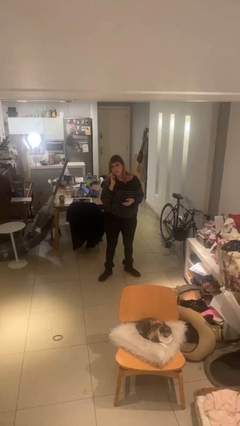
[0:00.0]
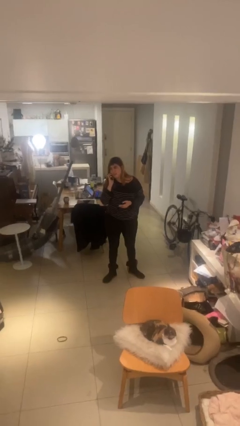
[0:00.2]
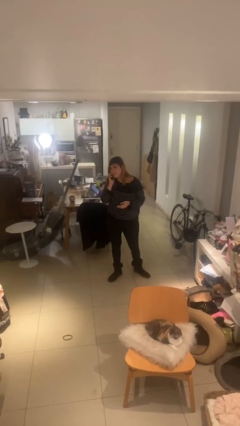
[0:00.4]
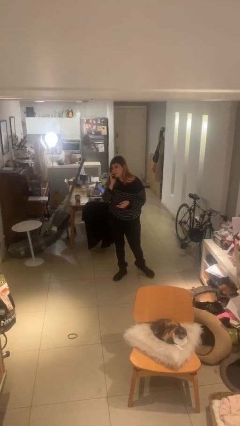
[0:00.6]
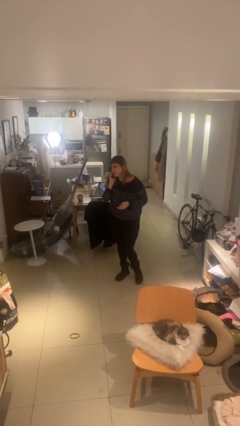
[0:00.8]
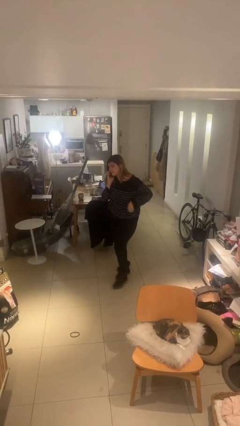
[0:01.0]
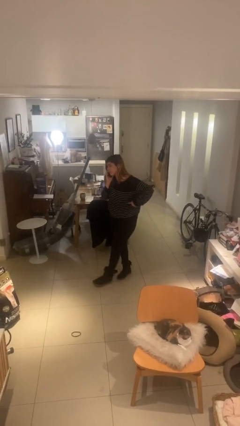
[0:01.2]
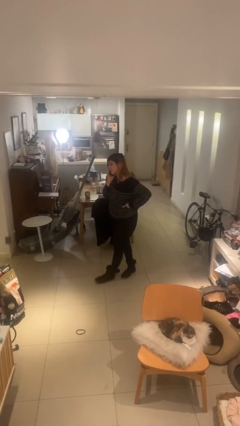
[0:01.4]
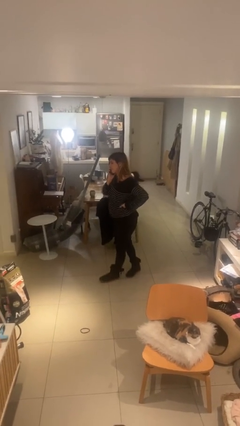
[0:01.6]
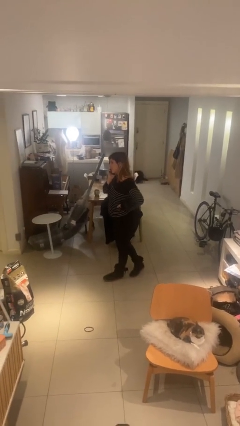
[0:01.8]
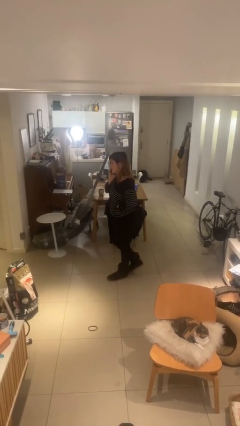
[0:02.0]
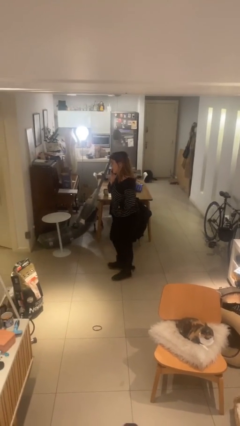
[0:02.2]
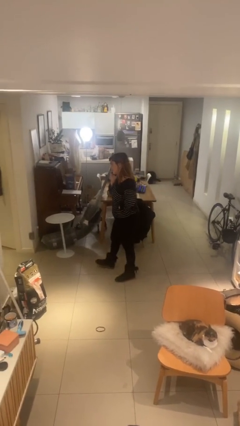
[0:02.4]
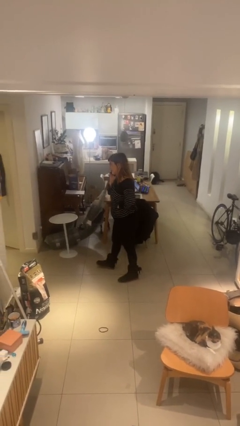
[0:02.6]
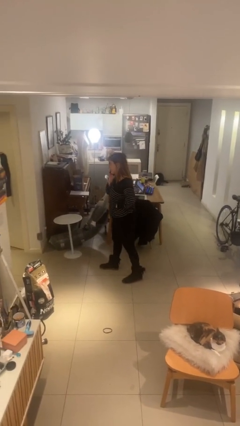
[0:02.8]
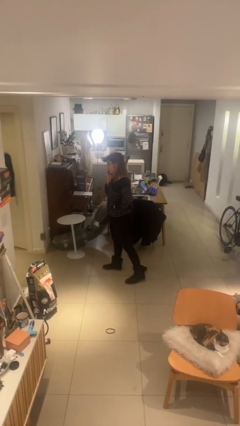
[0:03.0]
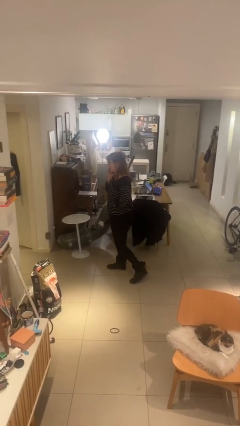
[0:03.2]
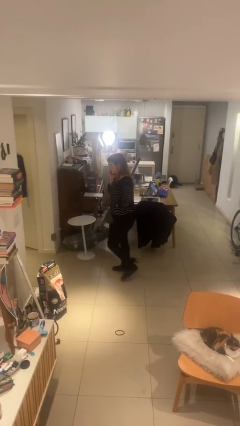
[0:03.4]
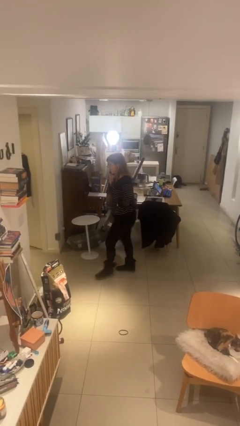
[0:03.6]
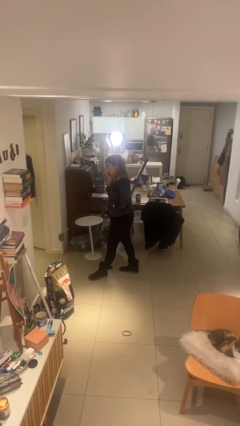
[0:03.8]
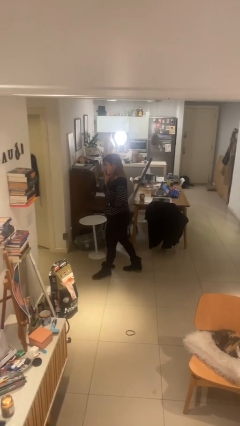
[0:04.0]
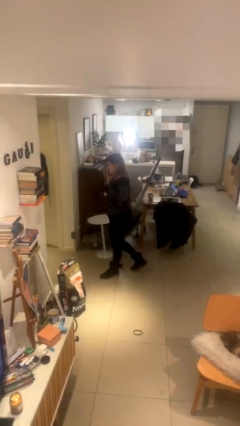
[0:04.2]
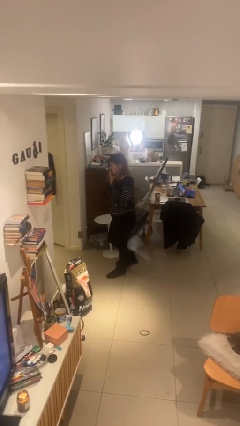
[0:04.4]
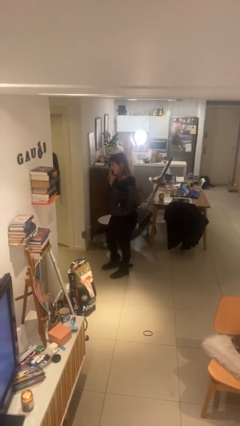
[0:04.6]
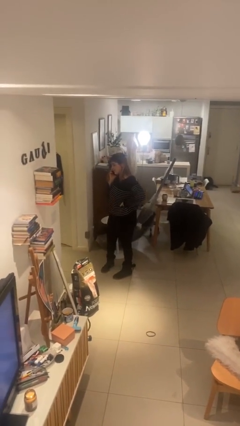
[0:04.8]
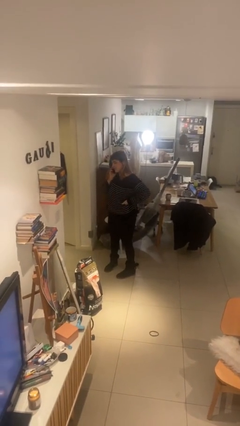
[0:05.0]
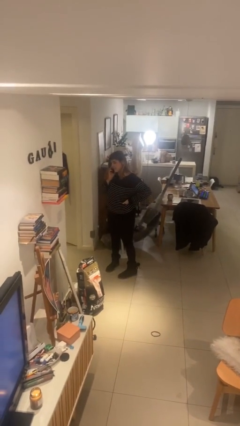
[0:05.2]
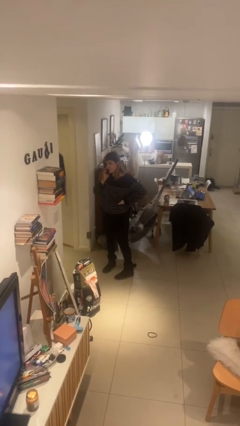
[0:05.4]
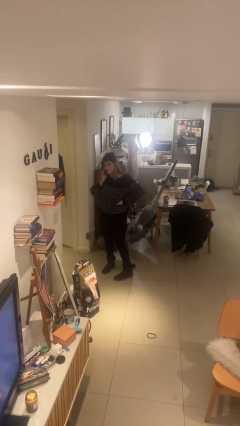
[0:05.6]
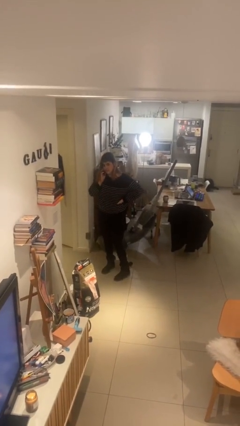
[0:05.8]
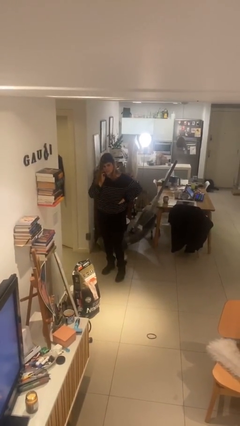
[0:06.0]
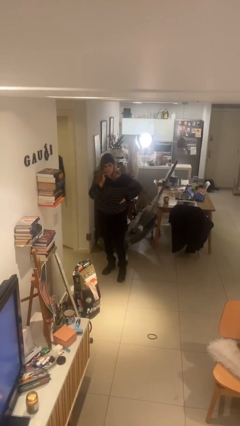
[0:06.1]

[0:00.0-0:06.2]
person talks on phone

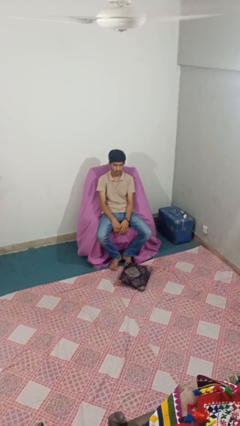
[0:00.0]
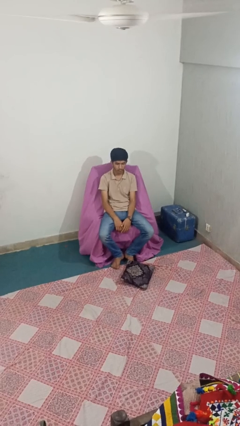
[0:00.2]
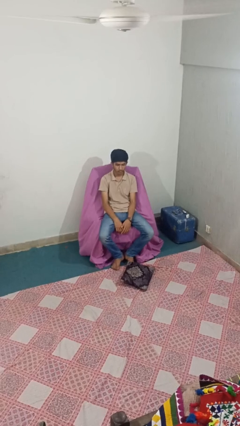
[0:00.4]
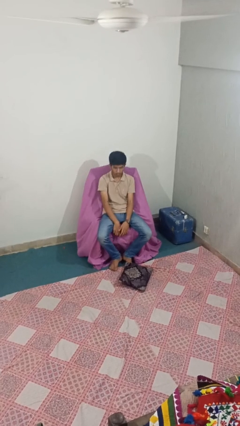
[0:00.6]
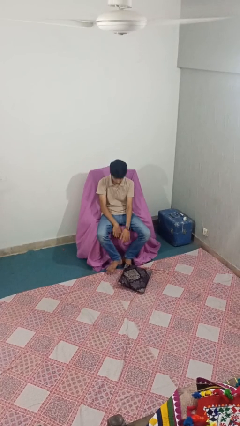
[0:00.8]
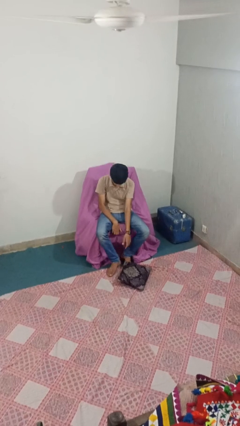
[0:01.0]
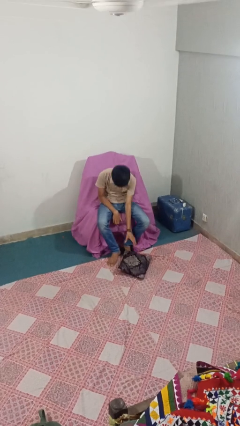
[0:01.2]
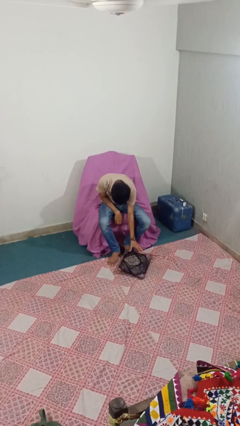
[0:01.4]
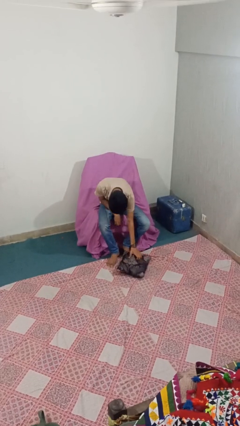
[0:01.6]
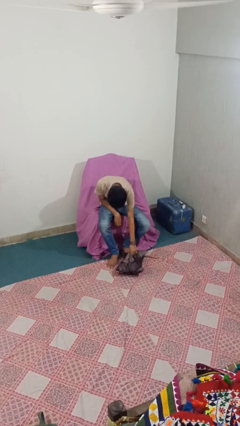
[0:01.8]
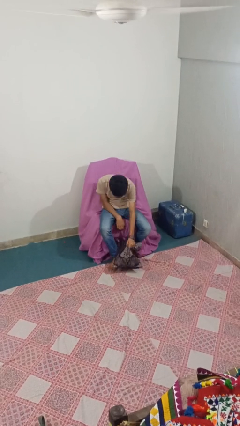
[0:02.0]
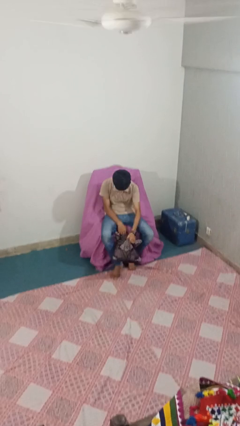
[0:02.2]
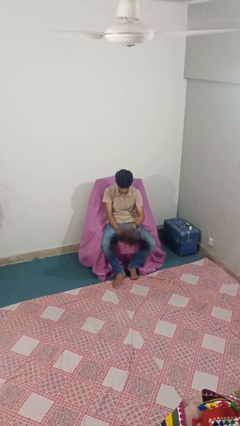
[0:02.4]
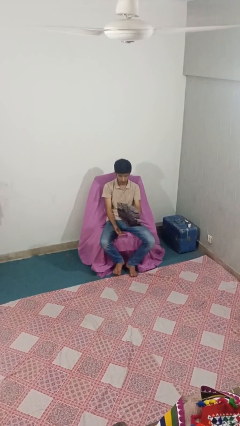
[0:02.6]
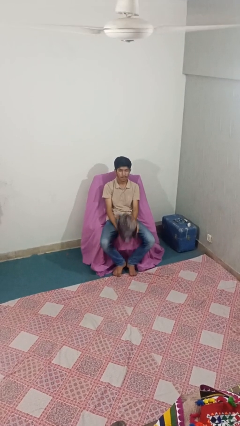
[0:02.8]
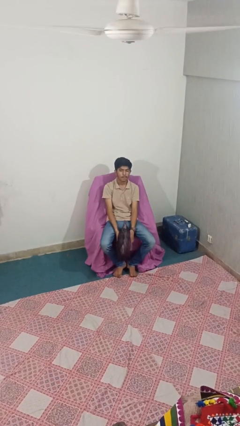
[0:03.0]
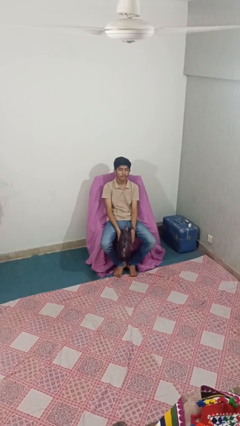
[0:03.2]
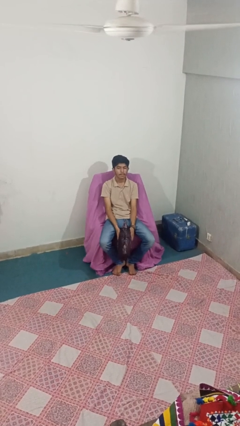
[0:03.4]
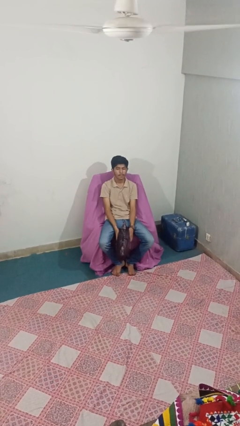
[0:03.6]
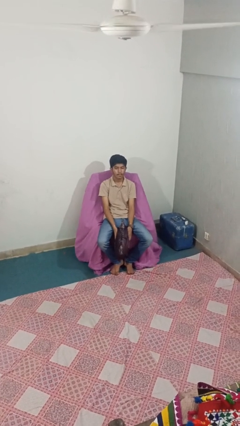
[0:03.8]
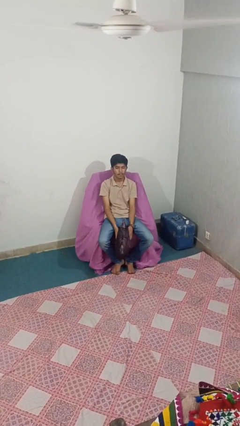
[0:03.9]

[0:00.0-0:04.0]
person picks up object from floor

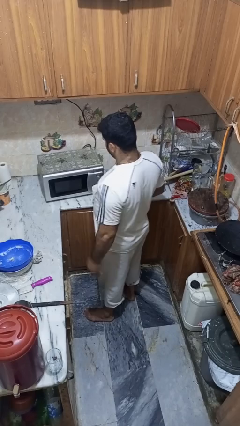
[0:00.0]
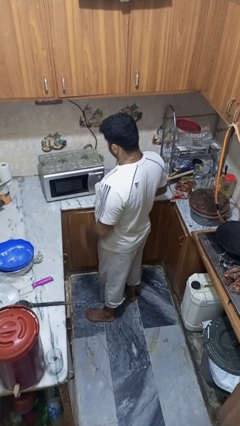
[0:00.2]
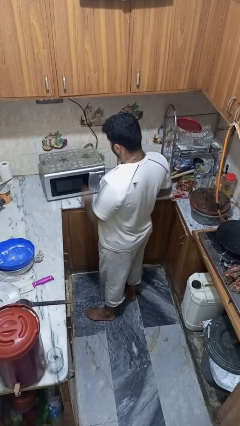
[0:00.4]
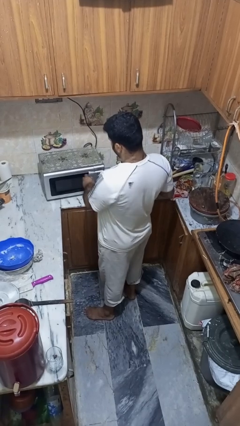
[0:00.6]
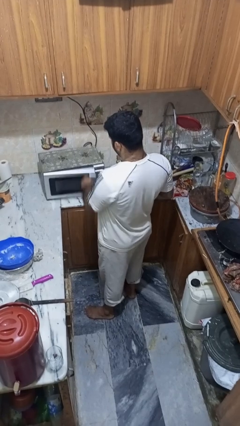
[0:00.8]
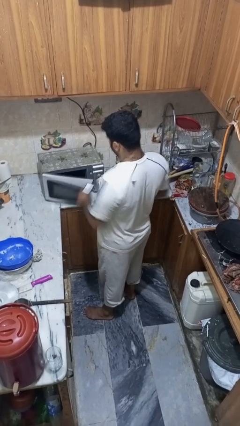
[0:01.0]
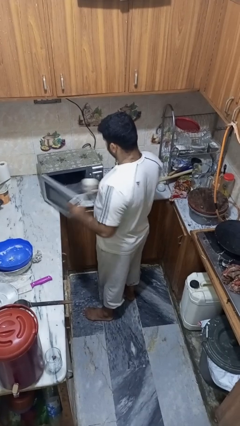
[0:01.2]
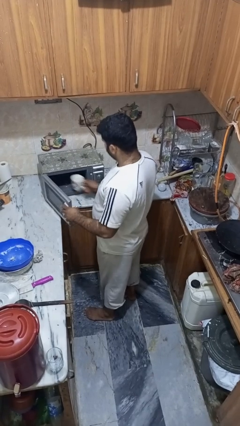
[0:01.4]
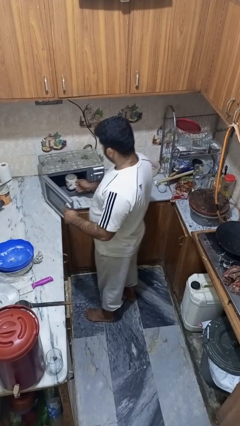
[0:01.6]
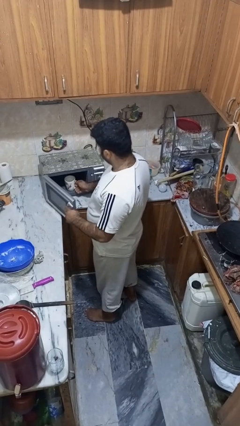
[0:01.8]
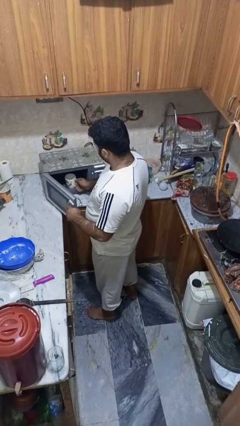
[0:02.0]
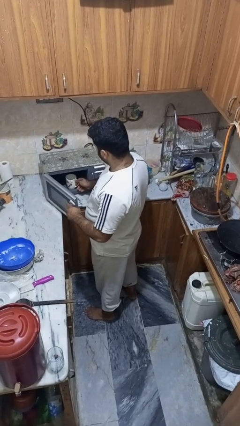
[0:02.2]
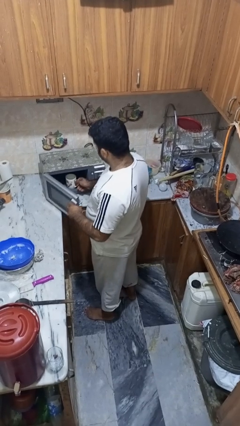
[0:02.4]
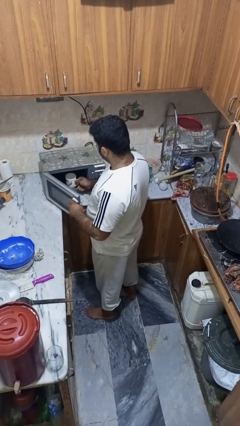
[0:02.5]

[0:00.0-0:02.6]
person puts object into microwave

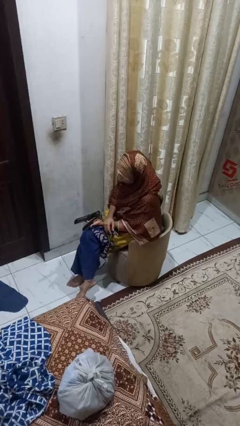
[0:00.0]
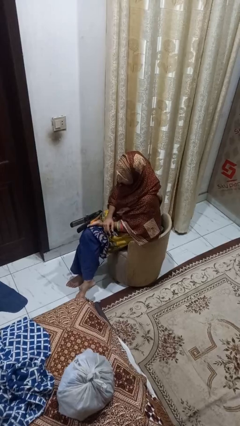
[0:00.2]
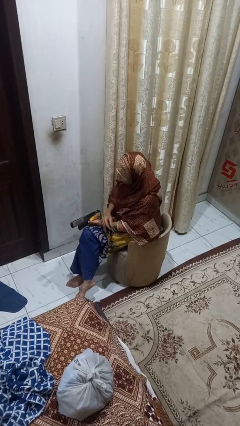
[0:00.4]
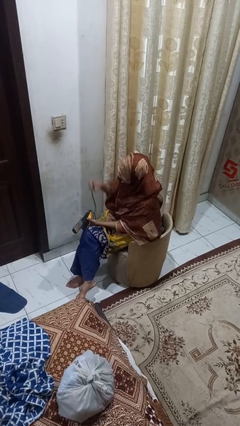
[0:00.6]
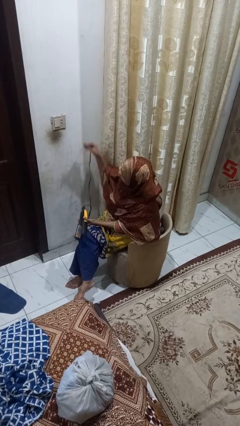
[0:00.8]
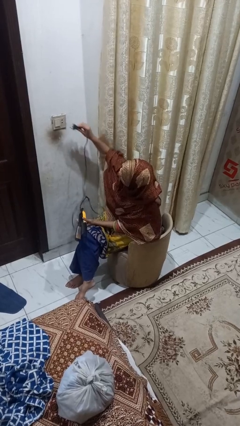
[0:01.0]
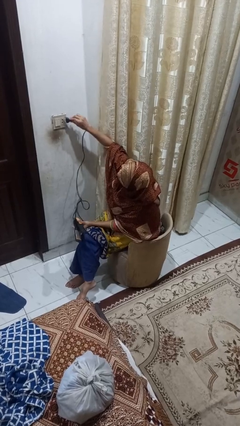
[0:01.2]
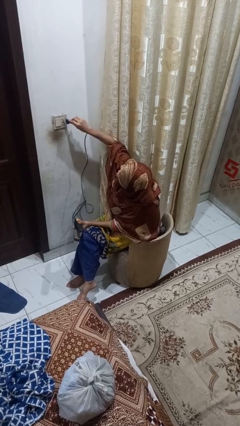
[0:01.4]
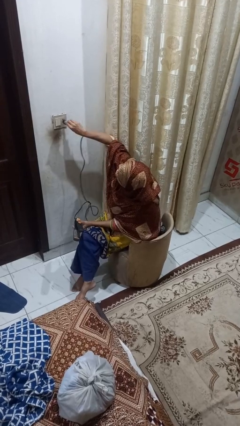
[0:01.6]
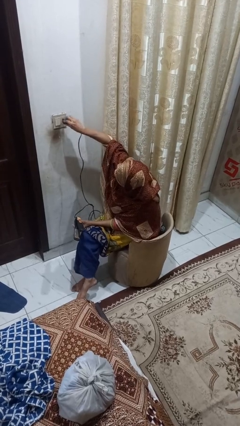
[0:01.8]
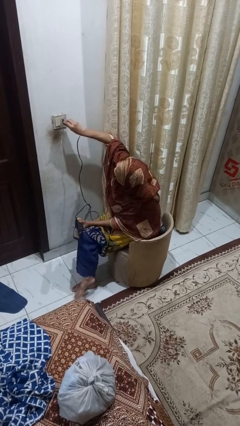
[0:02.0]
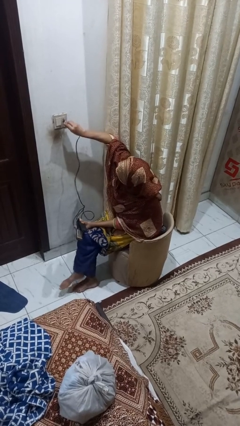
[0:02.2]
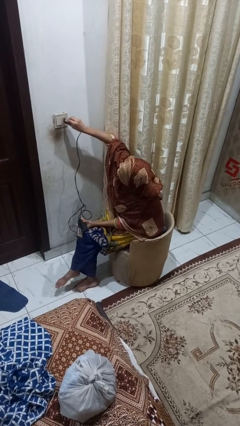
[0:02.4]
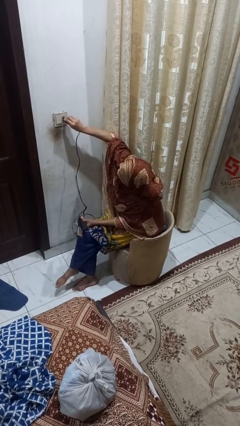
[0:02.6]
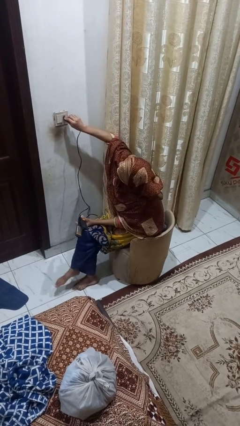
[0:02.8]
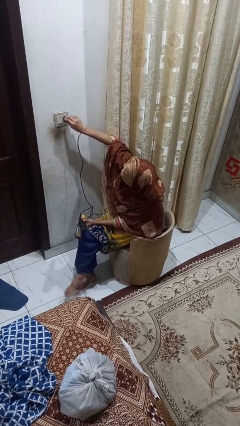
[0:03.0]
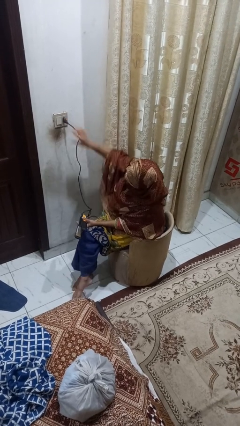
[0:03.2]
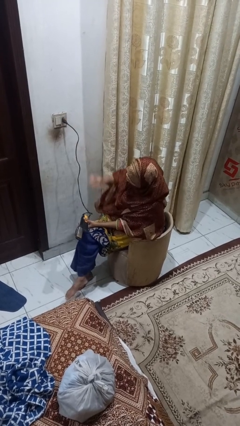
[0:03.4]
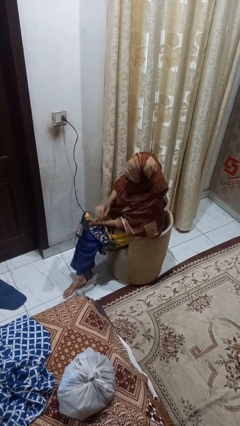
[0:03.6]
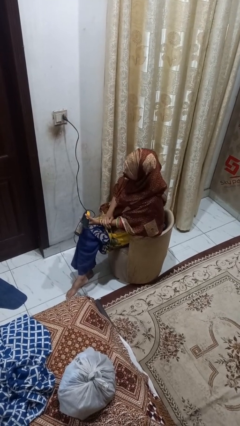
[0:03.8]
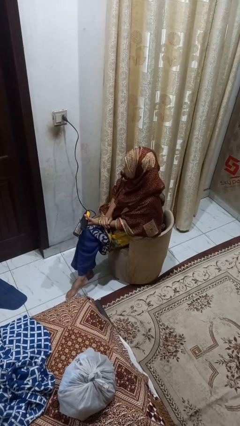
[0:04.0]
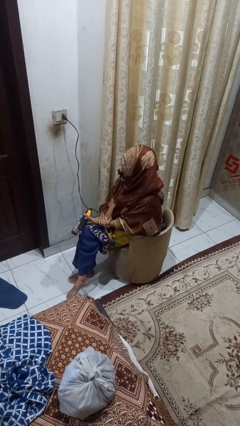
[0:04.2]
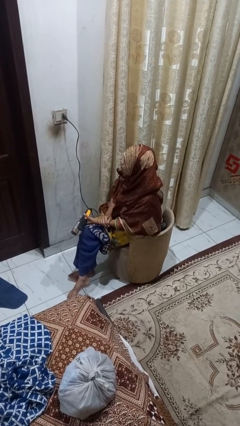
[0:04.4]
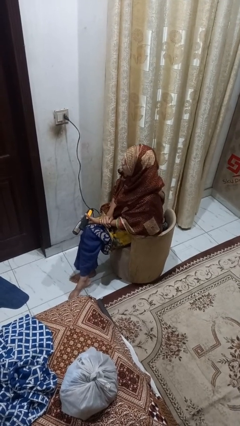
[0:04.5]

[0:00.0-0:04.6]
person plugs into electrical socket

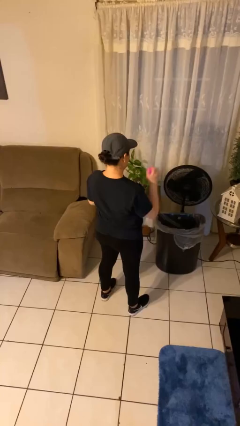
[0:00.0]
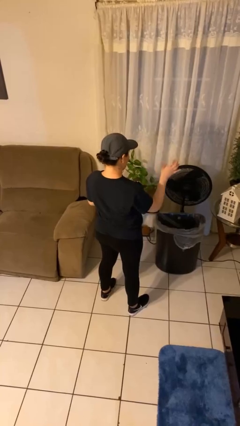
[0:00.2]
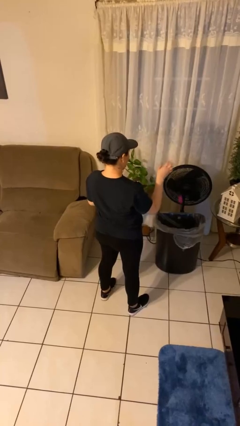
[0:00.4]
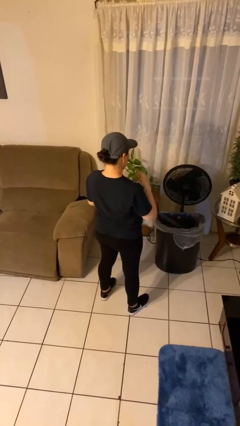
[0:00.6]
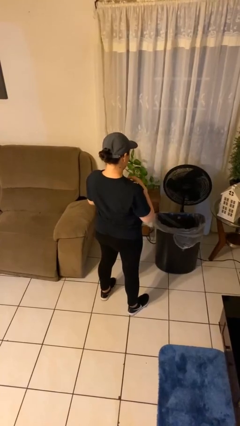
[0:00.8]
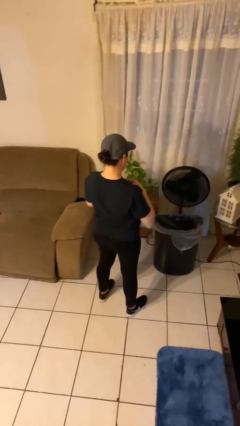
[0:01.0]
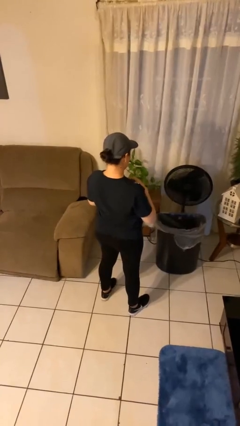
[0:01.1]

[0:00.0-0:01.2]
person discards trash
